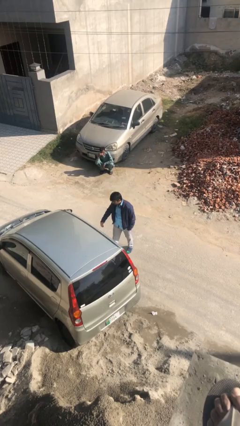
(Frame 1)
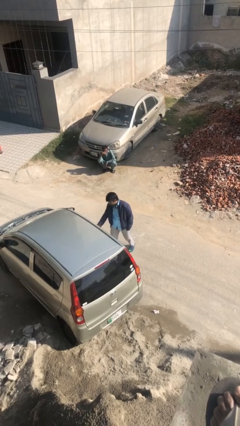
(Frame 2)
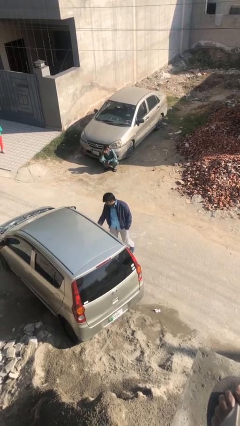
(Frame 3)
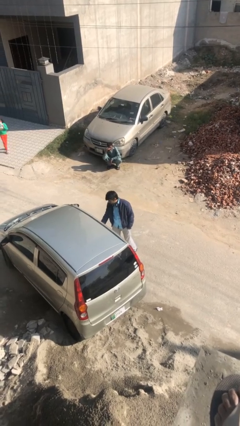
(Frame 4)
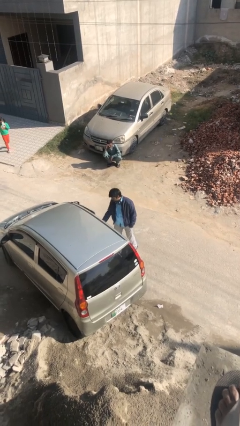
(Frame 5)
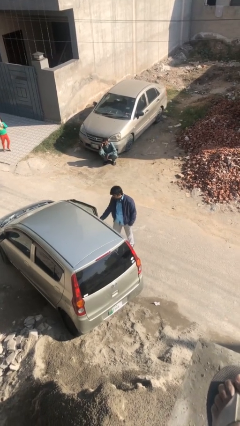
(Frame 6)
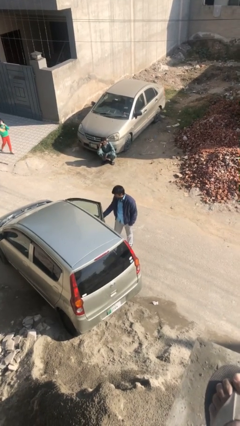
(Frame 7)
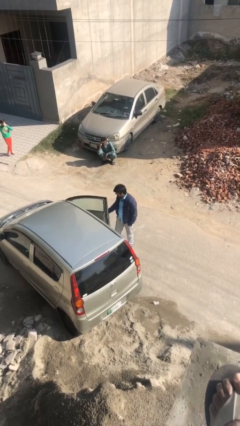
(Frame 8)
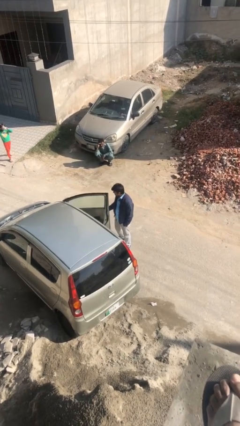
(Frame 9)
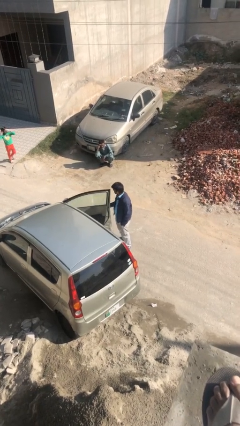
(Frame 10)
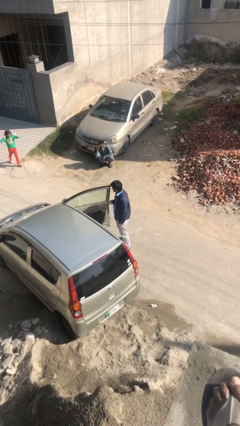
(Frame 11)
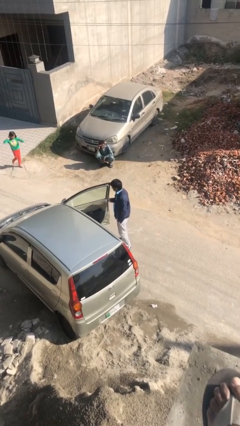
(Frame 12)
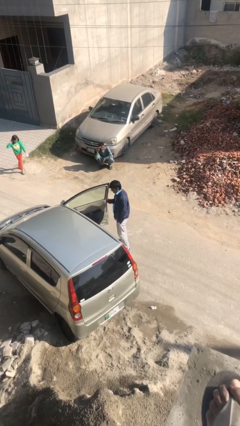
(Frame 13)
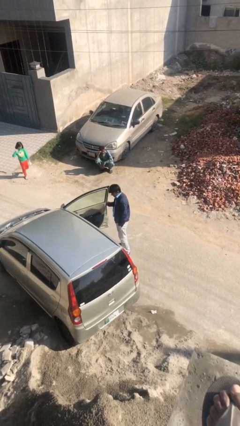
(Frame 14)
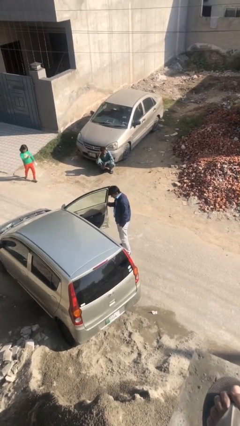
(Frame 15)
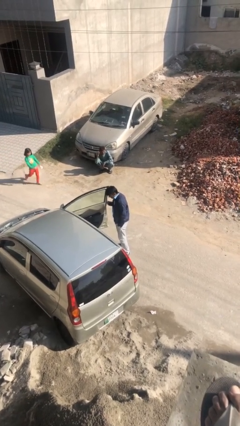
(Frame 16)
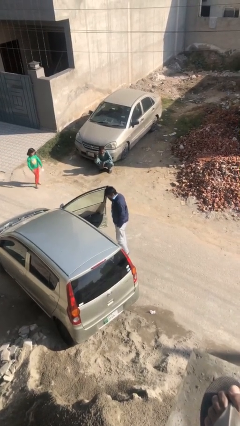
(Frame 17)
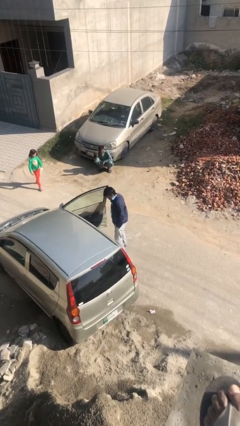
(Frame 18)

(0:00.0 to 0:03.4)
person opens car door

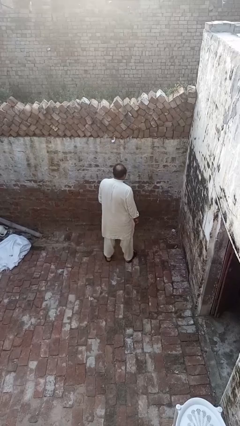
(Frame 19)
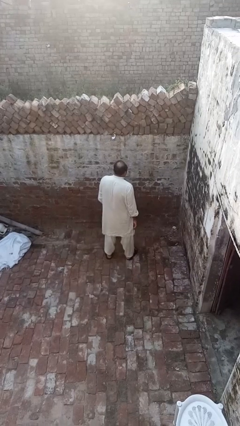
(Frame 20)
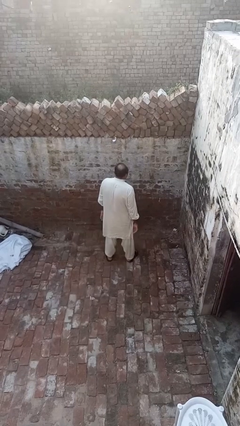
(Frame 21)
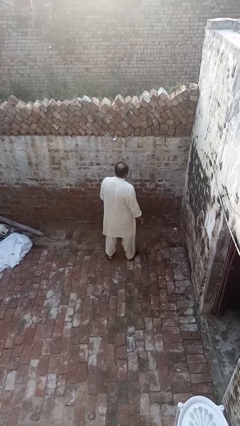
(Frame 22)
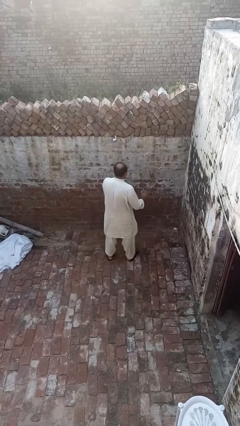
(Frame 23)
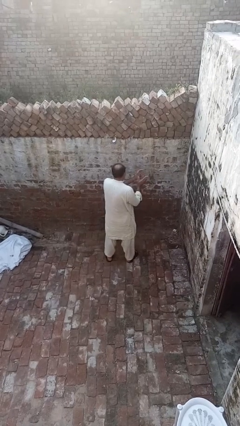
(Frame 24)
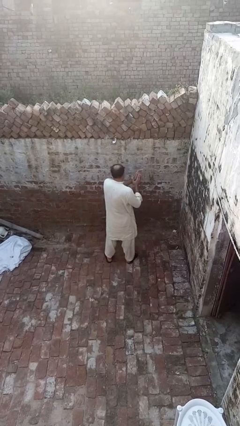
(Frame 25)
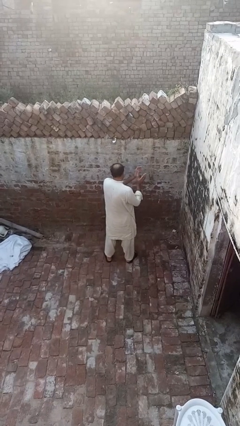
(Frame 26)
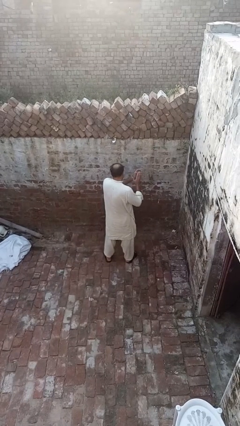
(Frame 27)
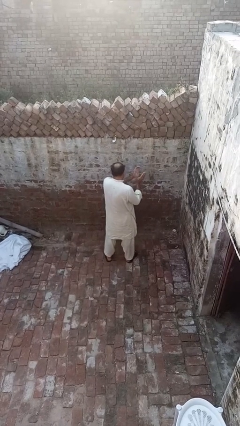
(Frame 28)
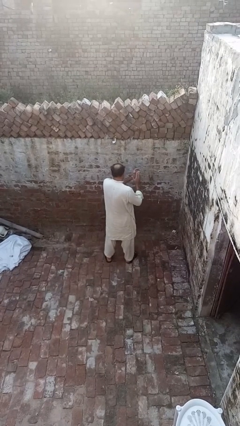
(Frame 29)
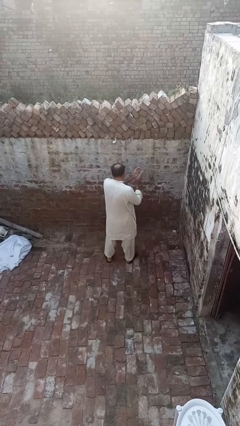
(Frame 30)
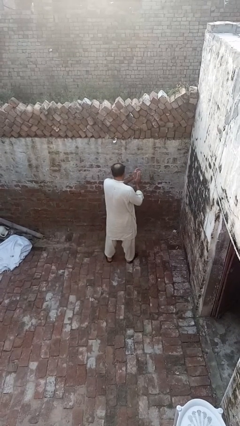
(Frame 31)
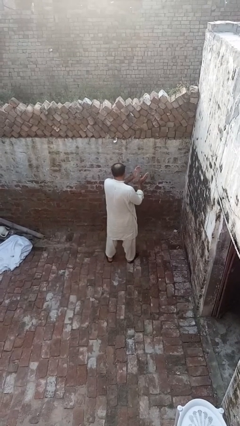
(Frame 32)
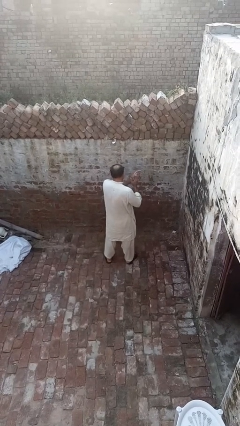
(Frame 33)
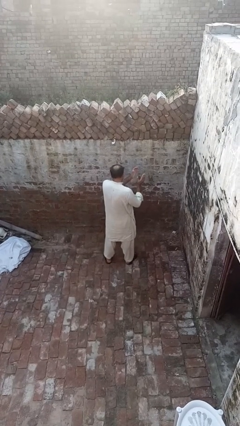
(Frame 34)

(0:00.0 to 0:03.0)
person claps hands

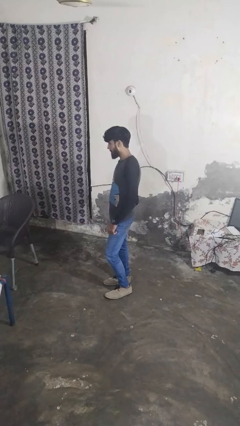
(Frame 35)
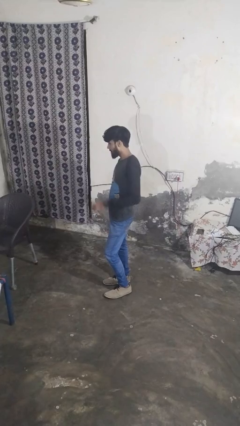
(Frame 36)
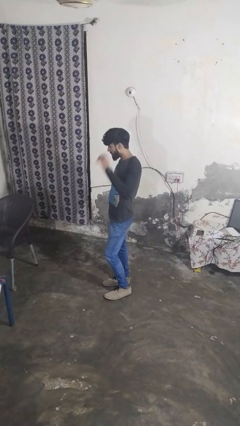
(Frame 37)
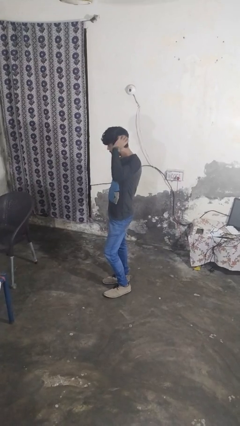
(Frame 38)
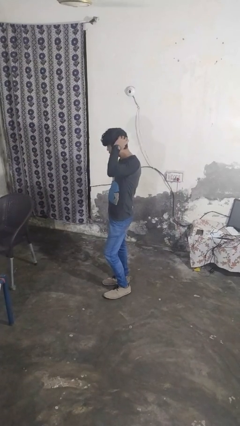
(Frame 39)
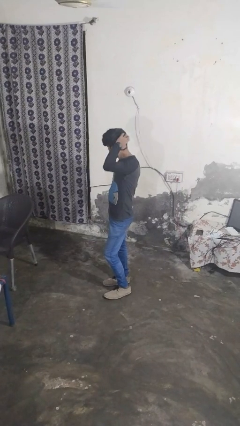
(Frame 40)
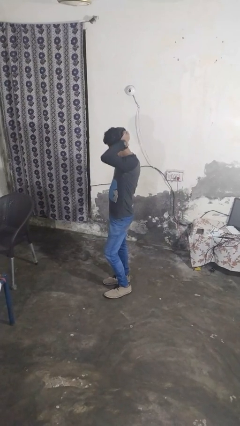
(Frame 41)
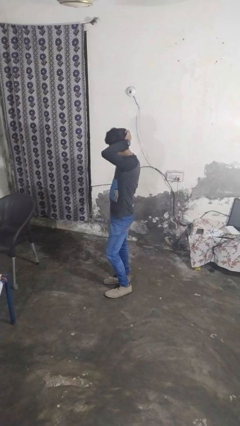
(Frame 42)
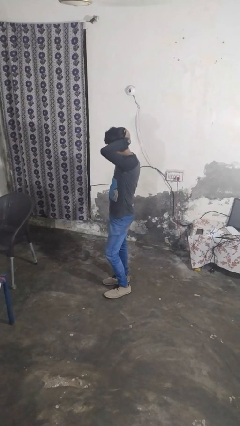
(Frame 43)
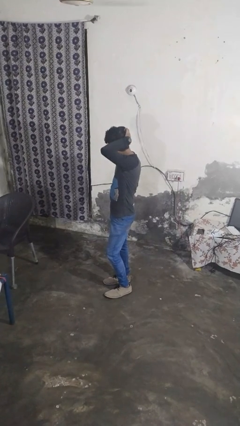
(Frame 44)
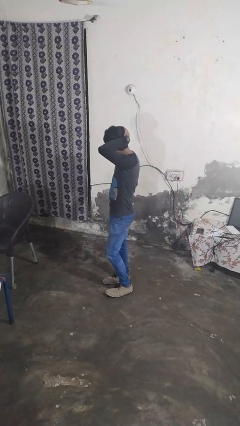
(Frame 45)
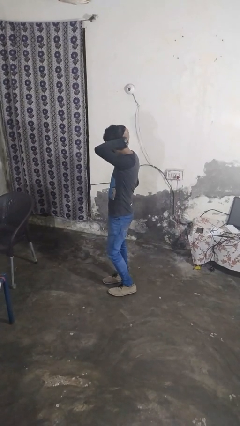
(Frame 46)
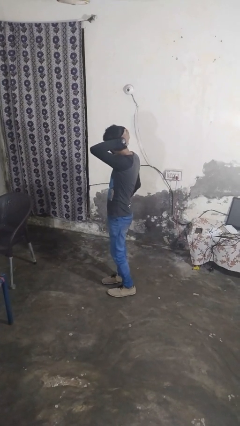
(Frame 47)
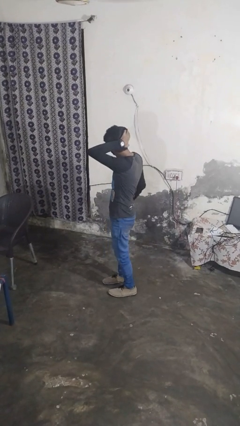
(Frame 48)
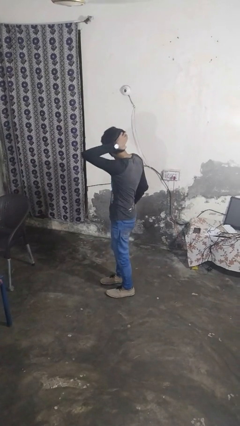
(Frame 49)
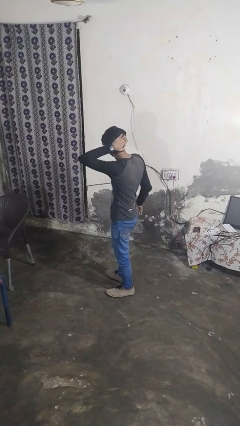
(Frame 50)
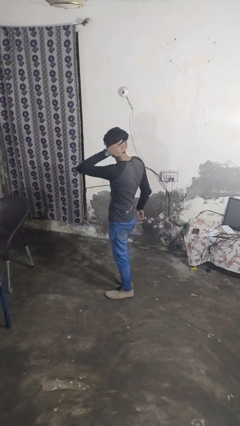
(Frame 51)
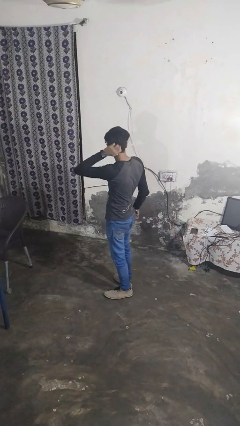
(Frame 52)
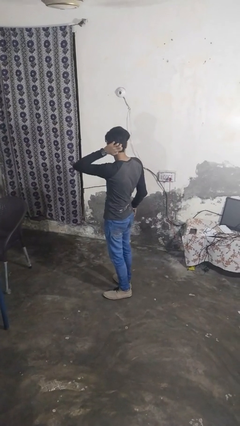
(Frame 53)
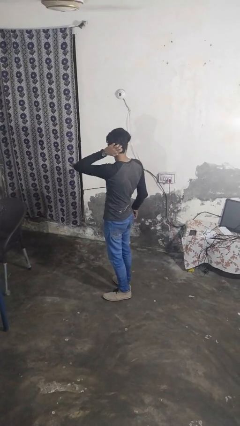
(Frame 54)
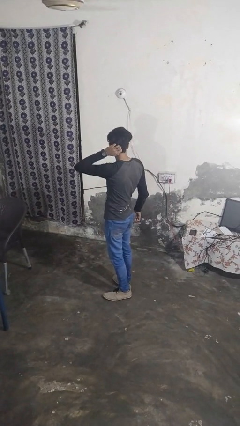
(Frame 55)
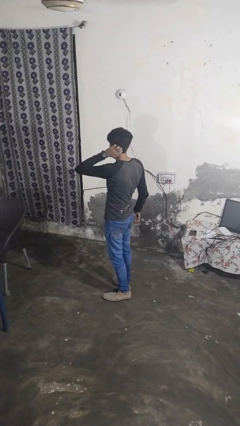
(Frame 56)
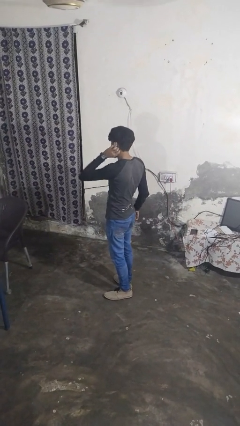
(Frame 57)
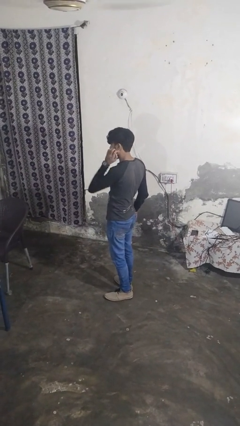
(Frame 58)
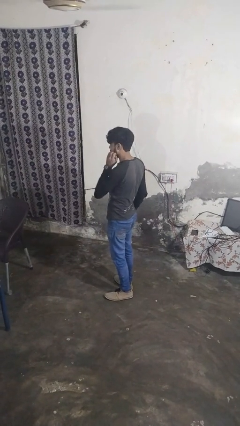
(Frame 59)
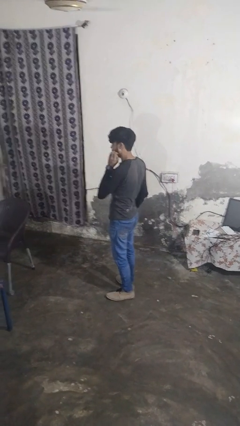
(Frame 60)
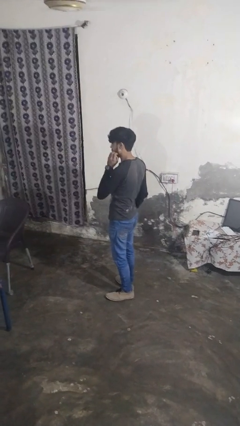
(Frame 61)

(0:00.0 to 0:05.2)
person scratches face

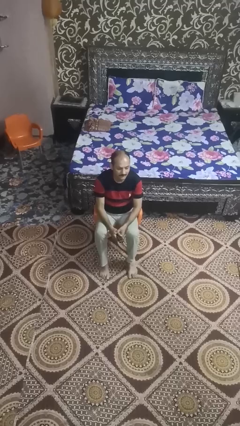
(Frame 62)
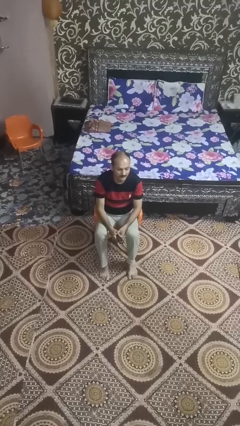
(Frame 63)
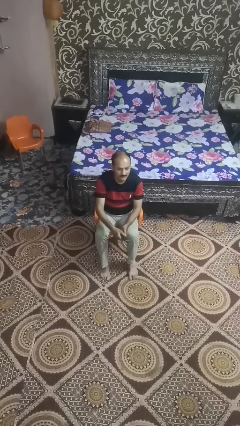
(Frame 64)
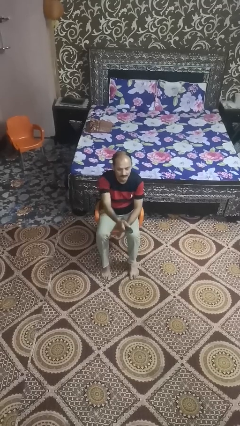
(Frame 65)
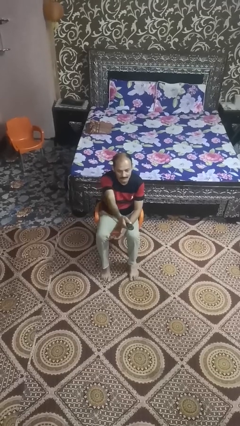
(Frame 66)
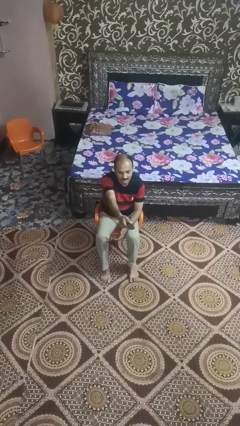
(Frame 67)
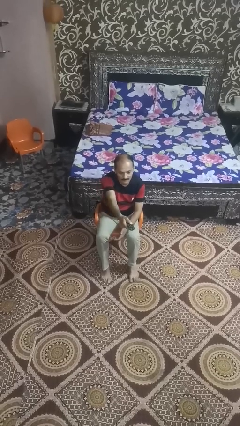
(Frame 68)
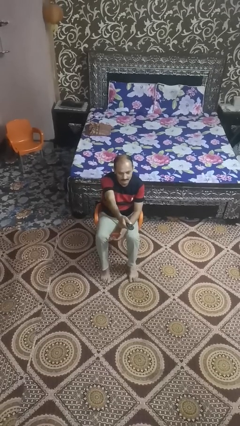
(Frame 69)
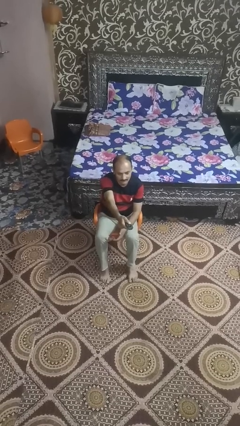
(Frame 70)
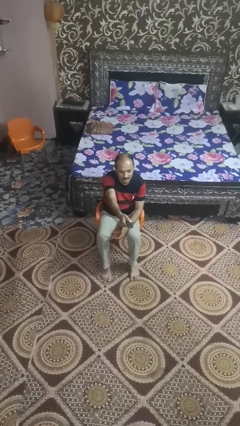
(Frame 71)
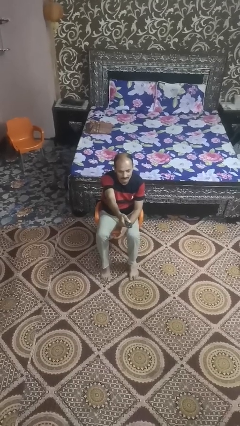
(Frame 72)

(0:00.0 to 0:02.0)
person uses television remote

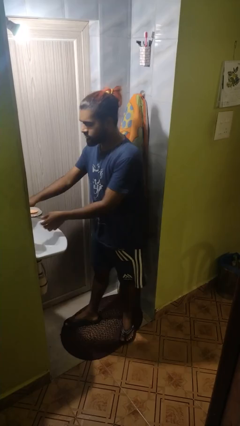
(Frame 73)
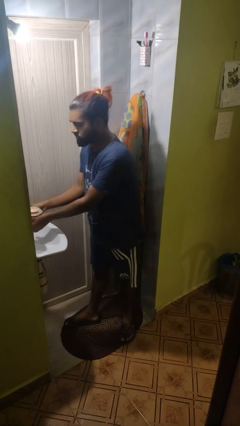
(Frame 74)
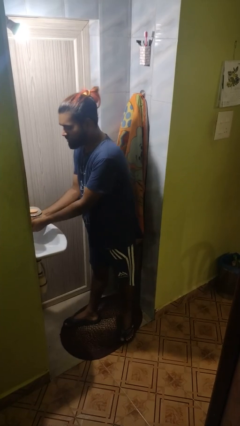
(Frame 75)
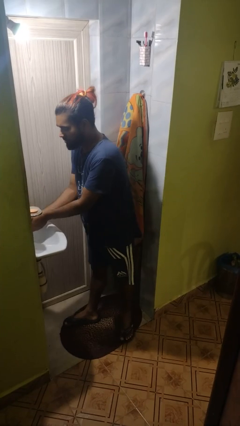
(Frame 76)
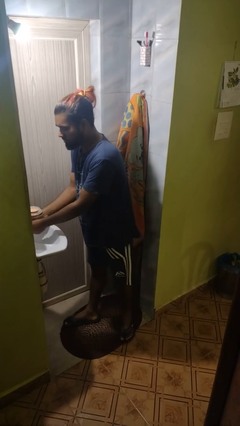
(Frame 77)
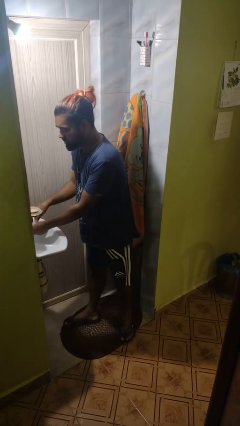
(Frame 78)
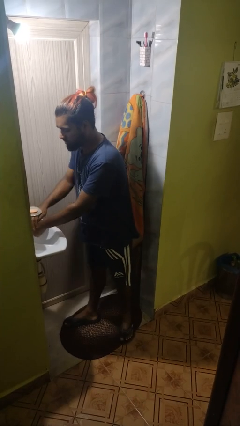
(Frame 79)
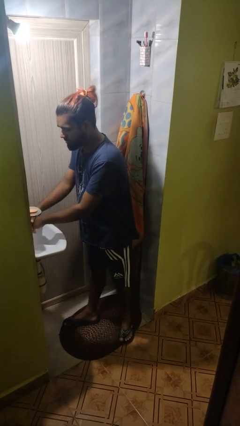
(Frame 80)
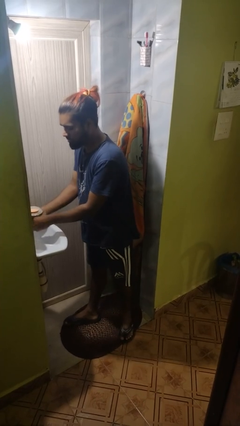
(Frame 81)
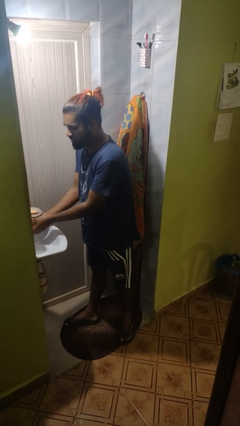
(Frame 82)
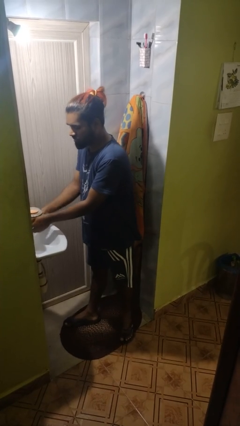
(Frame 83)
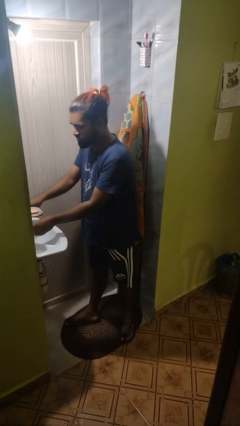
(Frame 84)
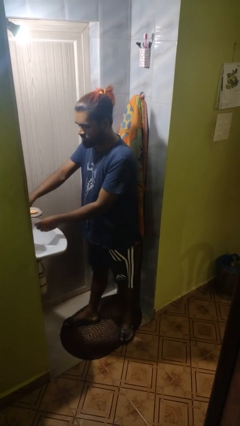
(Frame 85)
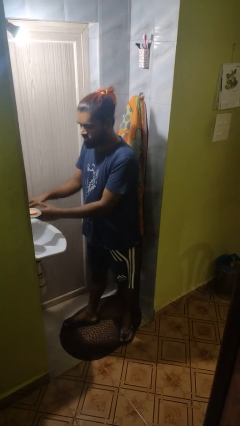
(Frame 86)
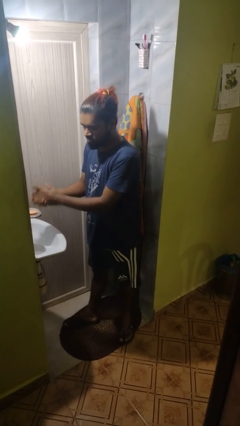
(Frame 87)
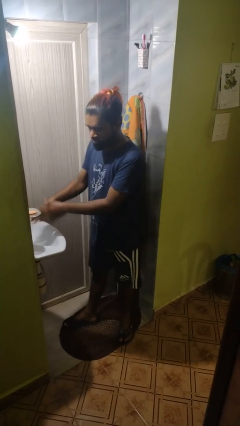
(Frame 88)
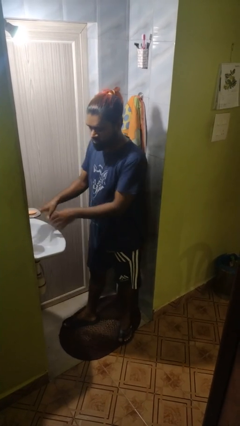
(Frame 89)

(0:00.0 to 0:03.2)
person washes hands

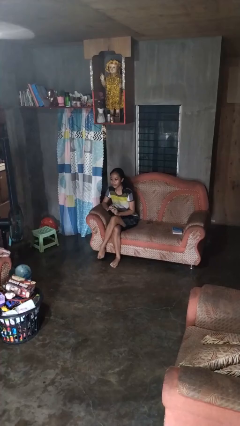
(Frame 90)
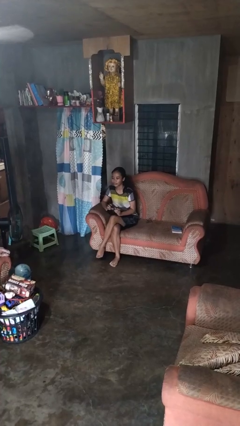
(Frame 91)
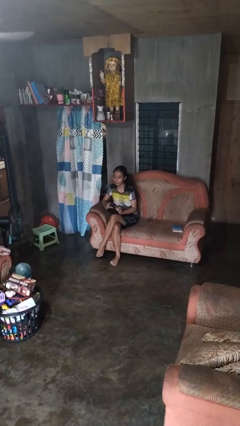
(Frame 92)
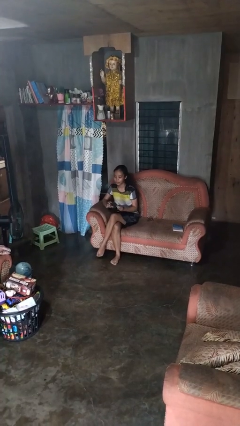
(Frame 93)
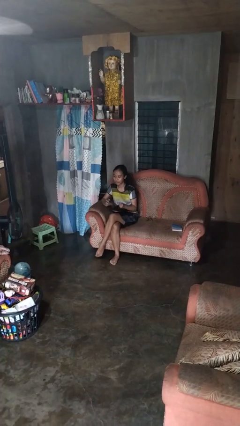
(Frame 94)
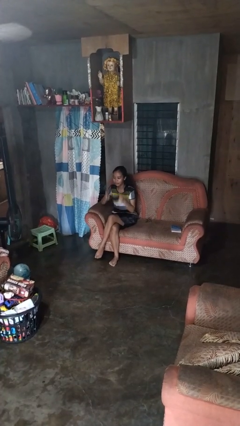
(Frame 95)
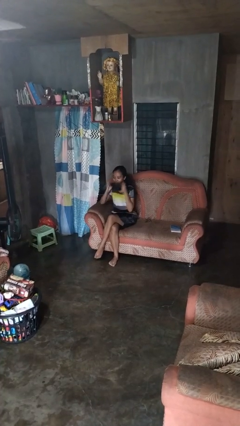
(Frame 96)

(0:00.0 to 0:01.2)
person puts on facemask
